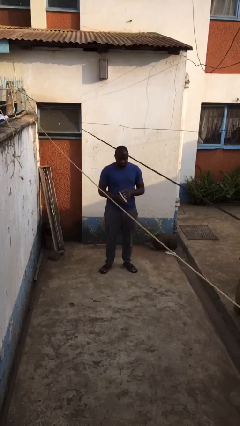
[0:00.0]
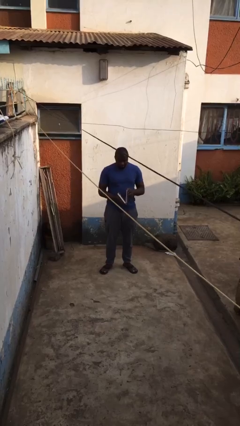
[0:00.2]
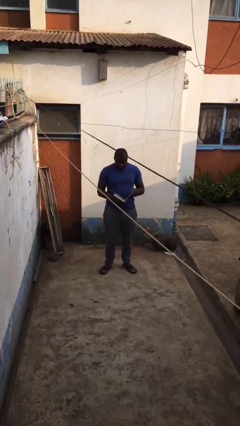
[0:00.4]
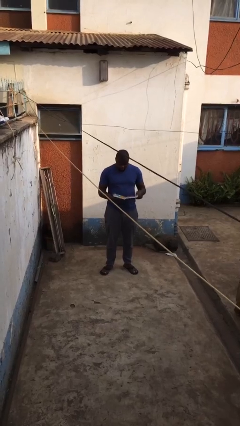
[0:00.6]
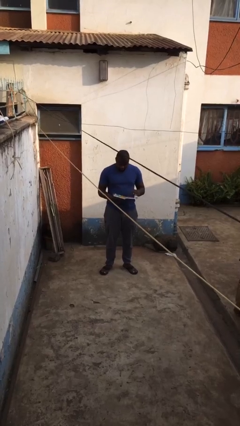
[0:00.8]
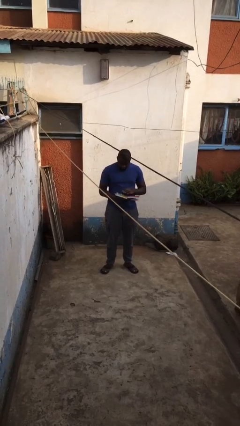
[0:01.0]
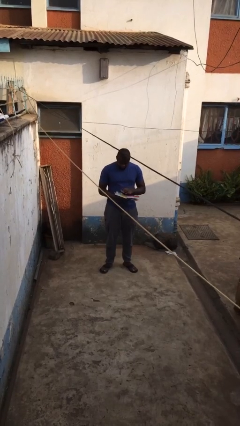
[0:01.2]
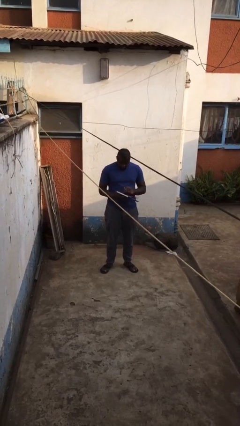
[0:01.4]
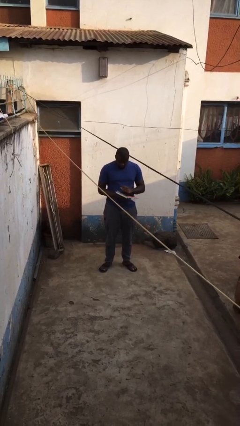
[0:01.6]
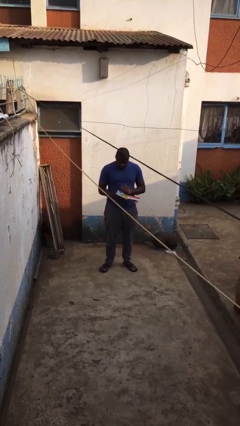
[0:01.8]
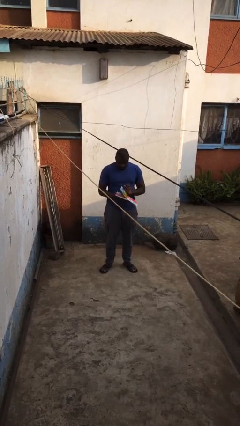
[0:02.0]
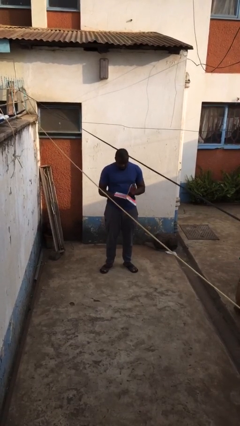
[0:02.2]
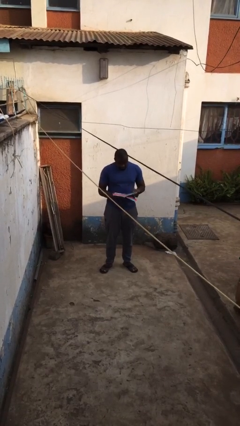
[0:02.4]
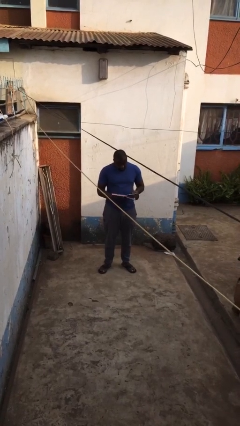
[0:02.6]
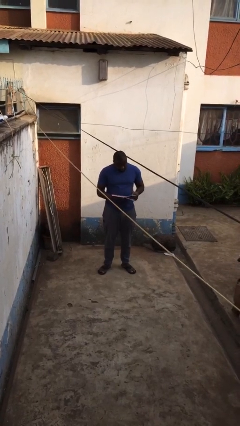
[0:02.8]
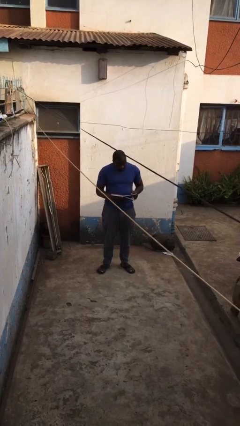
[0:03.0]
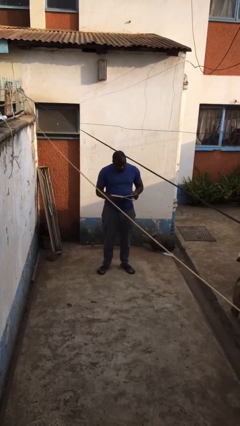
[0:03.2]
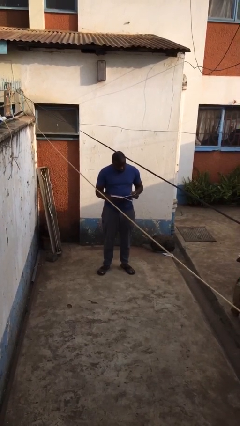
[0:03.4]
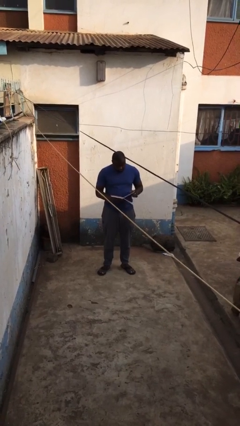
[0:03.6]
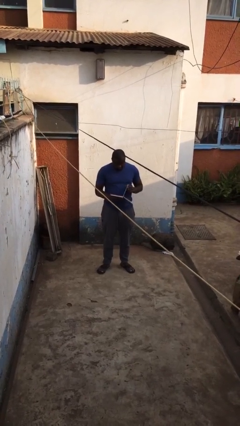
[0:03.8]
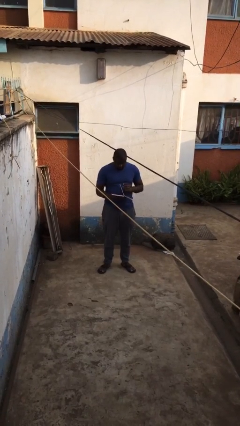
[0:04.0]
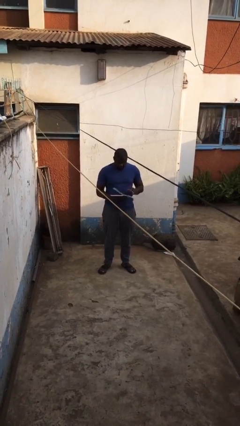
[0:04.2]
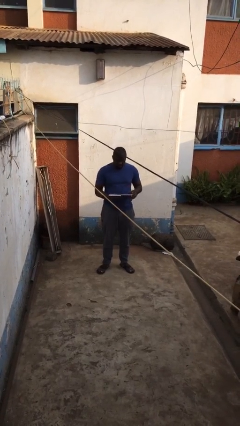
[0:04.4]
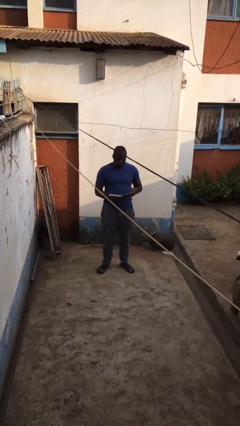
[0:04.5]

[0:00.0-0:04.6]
person reads book

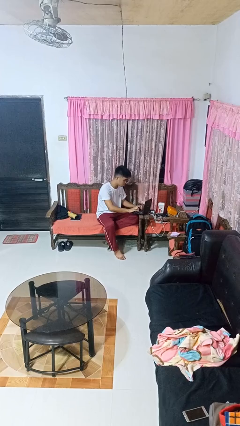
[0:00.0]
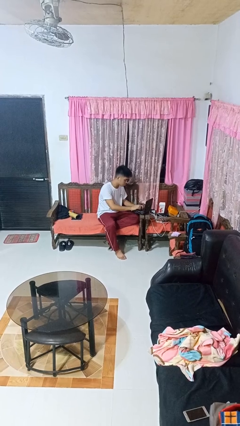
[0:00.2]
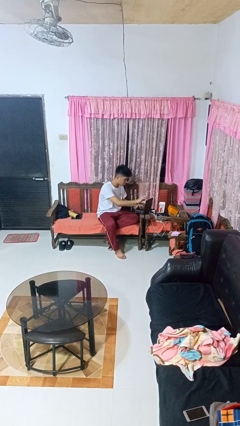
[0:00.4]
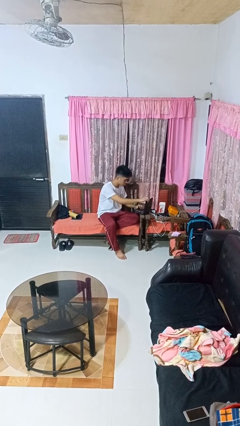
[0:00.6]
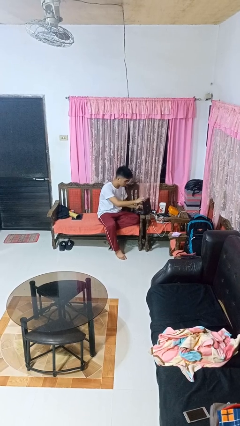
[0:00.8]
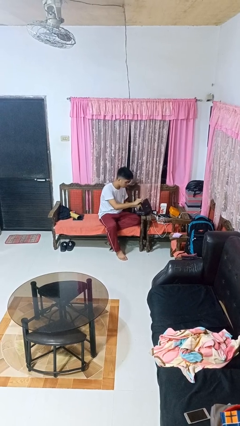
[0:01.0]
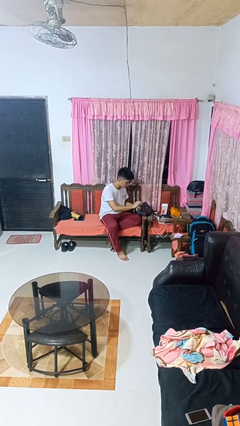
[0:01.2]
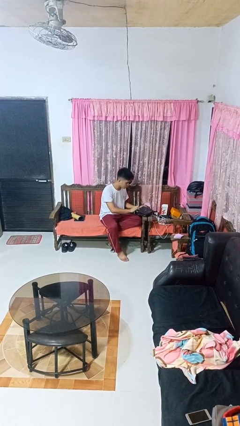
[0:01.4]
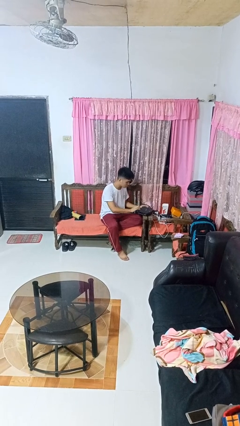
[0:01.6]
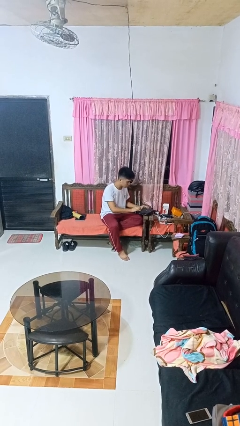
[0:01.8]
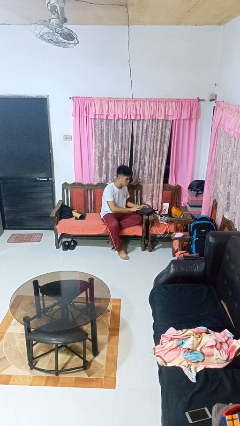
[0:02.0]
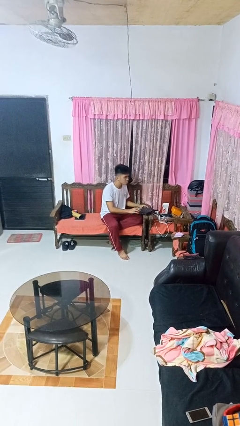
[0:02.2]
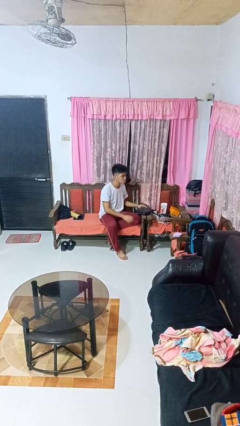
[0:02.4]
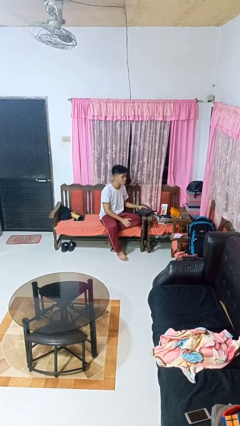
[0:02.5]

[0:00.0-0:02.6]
person closes laptop

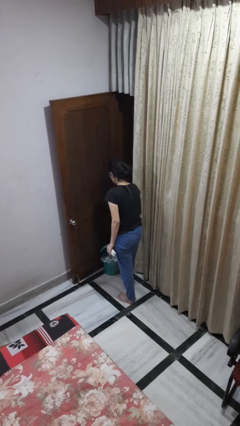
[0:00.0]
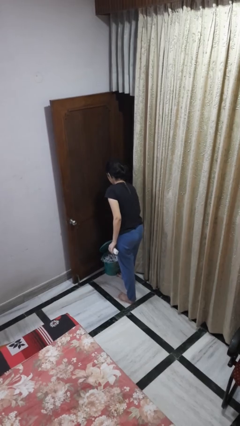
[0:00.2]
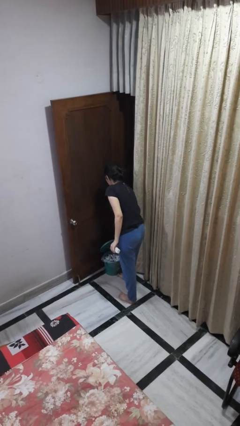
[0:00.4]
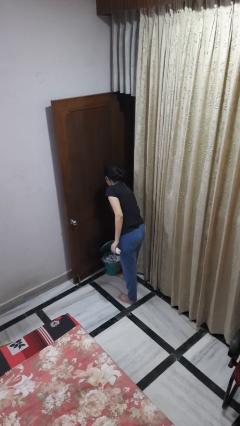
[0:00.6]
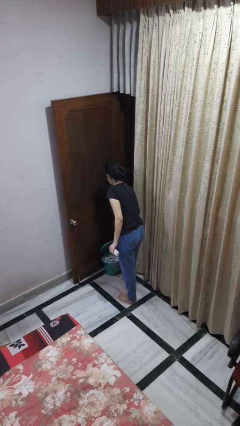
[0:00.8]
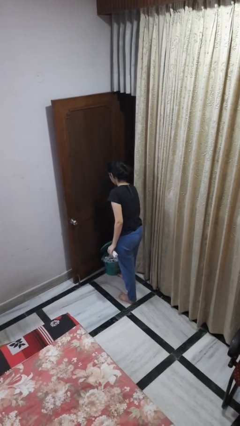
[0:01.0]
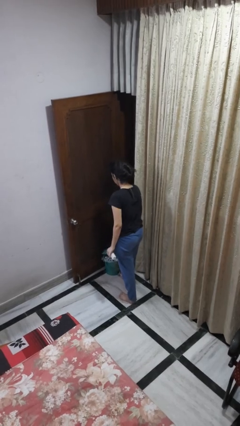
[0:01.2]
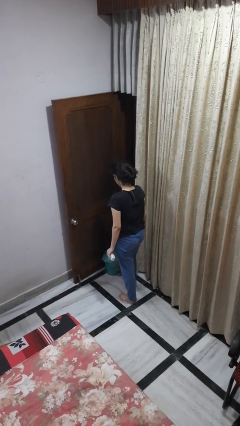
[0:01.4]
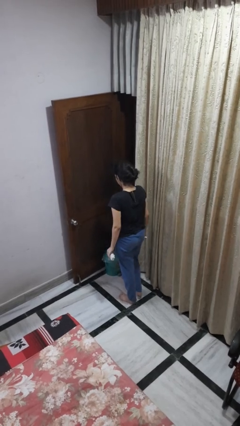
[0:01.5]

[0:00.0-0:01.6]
person discards trash

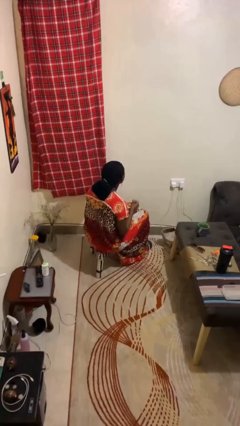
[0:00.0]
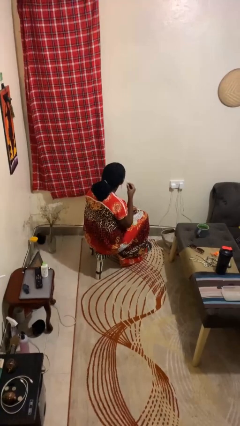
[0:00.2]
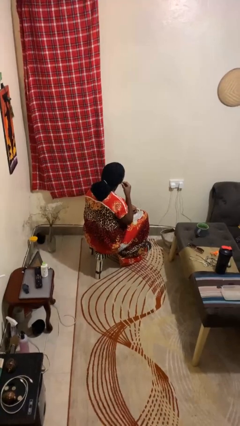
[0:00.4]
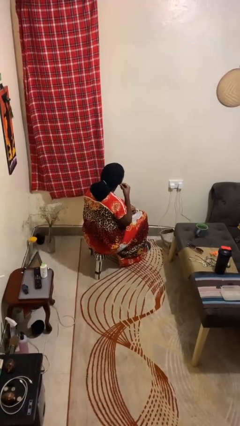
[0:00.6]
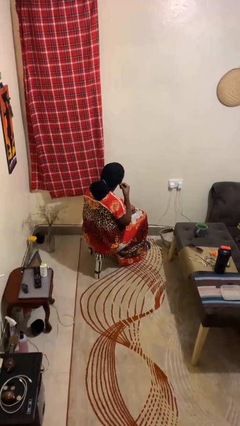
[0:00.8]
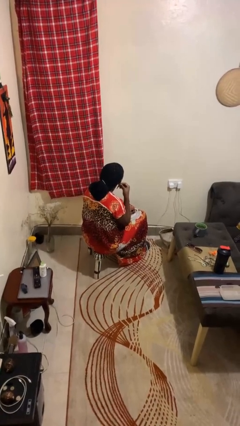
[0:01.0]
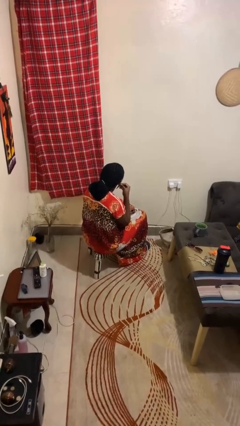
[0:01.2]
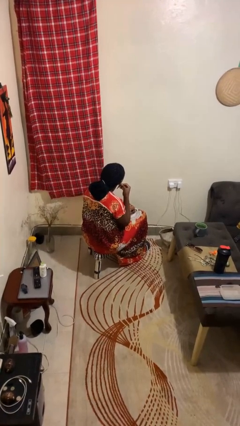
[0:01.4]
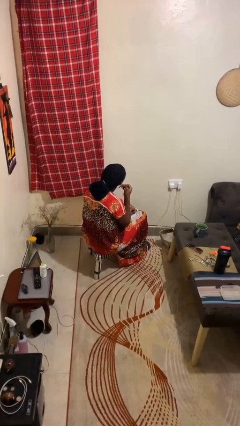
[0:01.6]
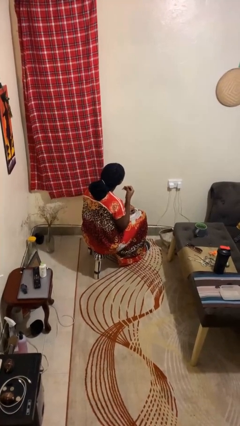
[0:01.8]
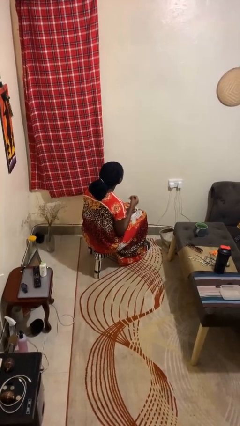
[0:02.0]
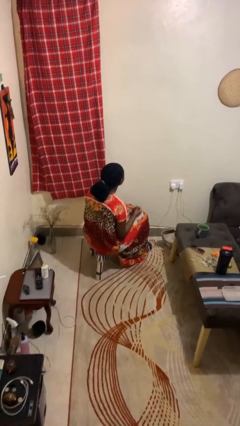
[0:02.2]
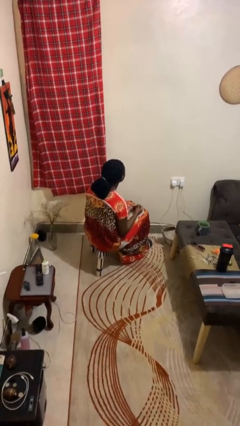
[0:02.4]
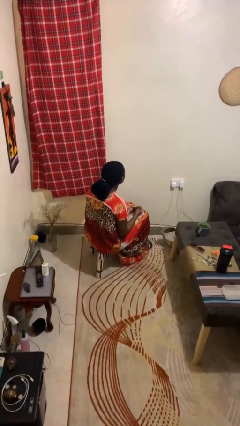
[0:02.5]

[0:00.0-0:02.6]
person takes off earrings

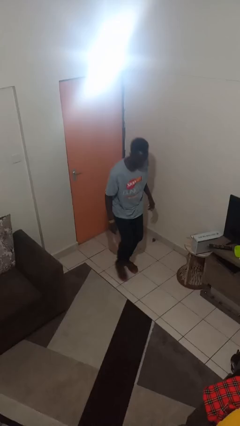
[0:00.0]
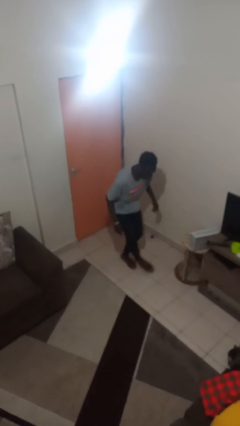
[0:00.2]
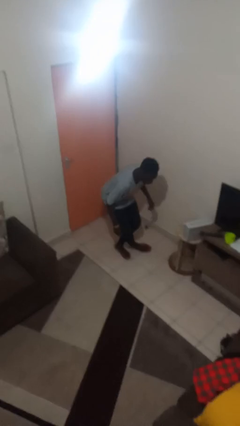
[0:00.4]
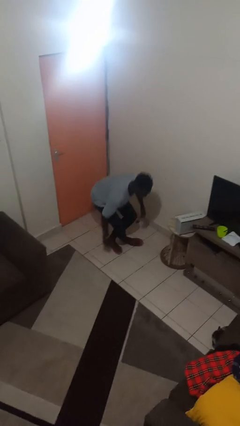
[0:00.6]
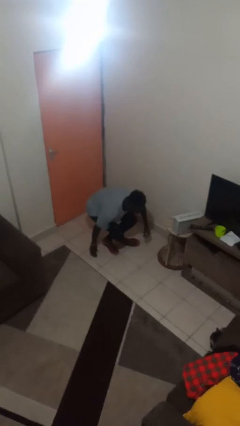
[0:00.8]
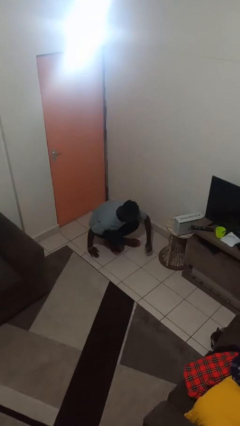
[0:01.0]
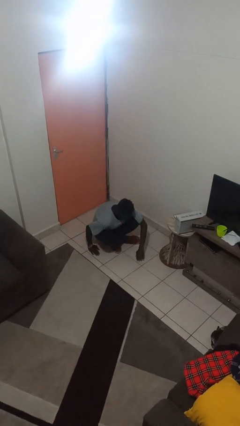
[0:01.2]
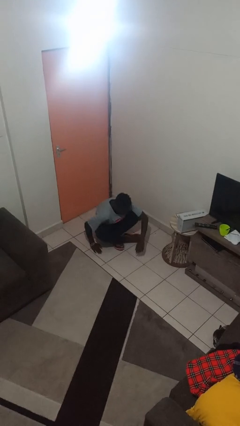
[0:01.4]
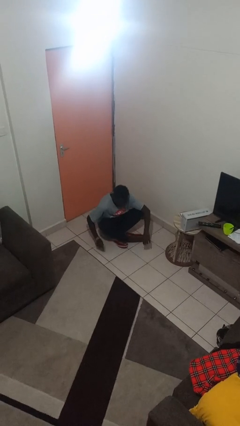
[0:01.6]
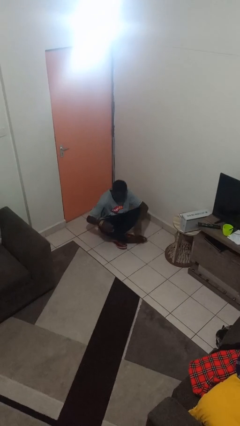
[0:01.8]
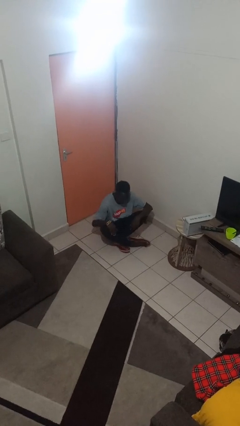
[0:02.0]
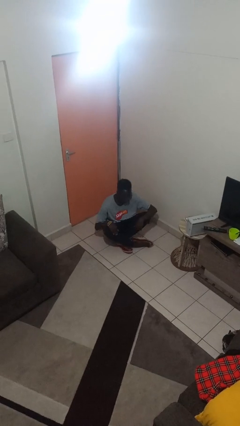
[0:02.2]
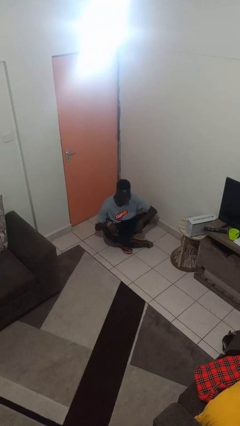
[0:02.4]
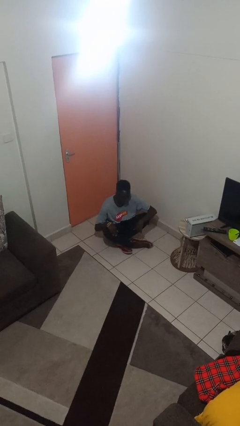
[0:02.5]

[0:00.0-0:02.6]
person sits crisscross

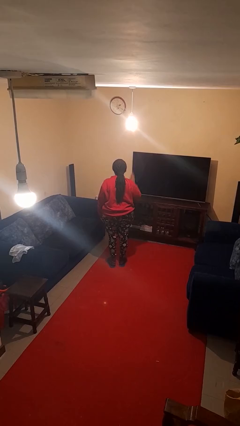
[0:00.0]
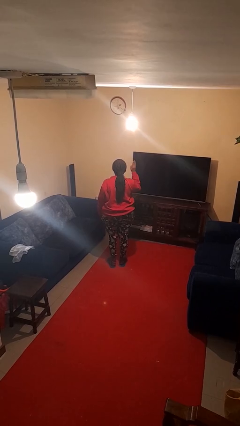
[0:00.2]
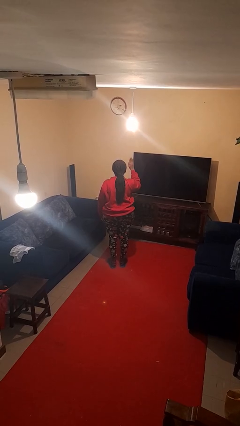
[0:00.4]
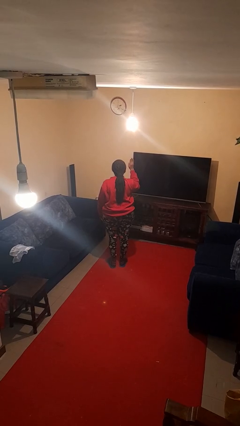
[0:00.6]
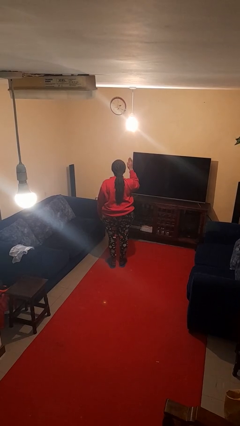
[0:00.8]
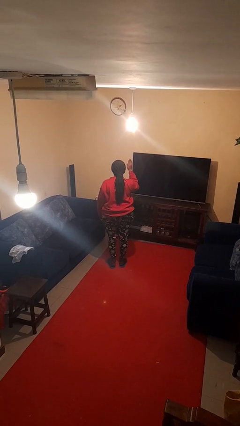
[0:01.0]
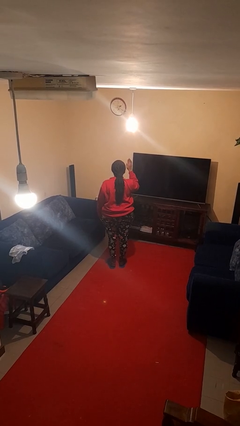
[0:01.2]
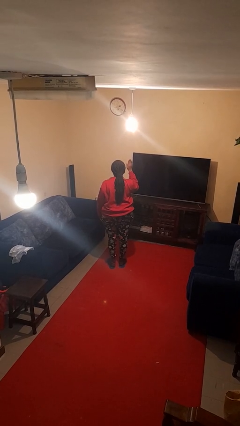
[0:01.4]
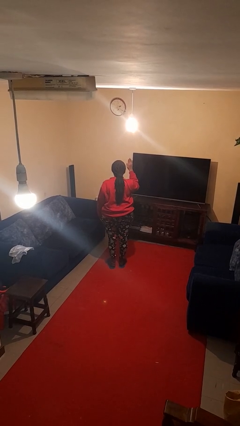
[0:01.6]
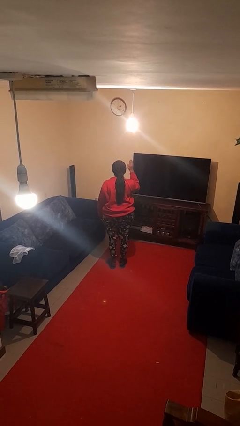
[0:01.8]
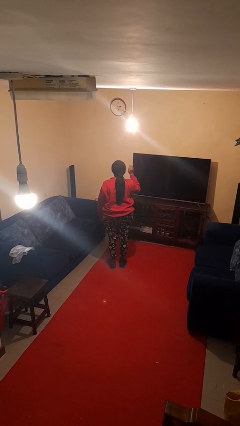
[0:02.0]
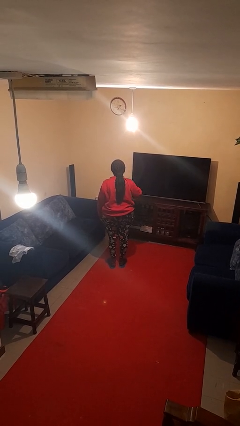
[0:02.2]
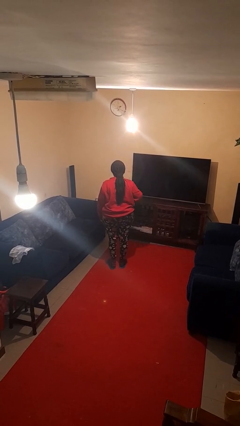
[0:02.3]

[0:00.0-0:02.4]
person gestures stop

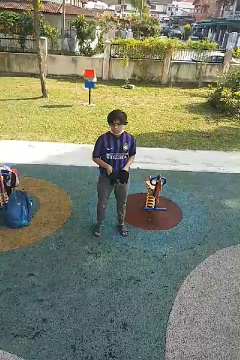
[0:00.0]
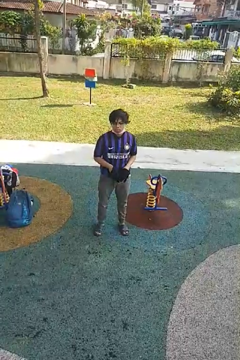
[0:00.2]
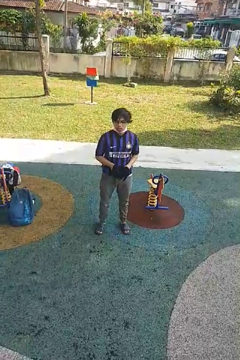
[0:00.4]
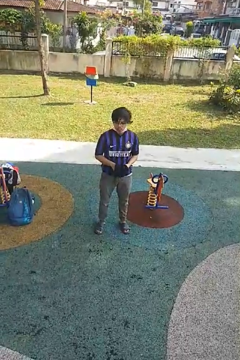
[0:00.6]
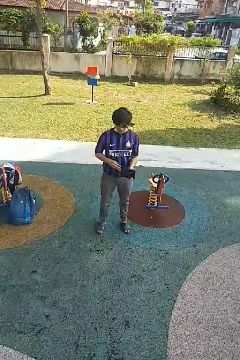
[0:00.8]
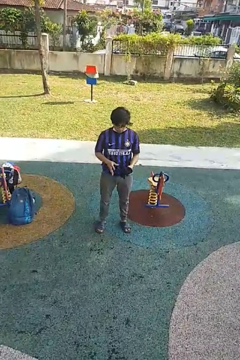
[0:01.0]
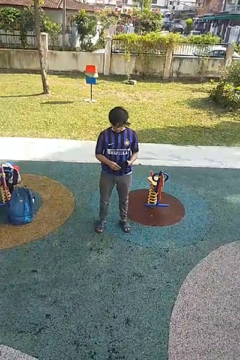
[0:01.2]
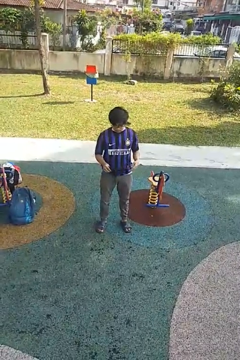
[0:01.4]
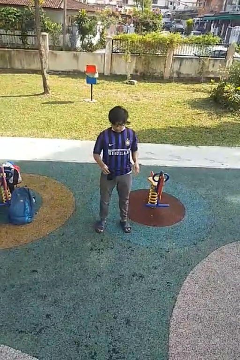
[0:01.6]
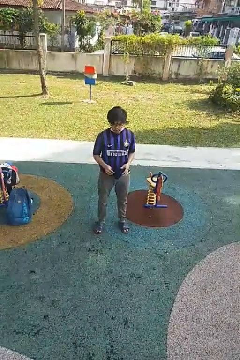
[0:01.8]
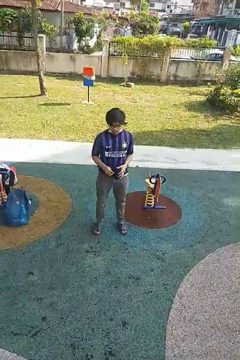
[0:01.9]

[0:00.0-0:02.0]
person takes off gloves
